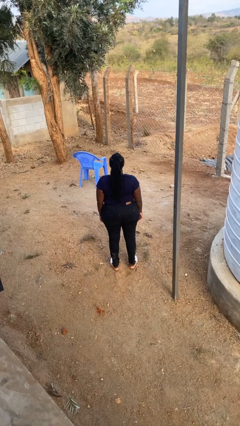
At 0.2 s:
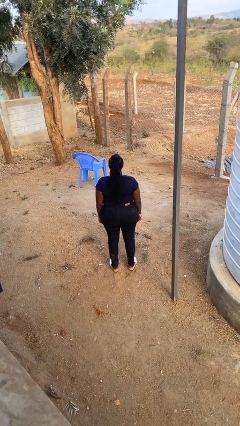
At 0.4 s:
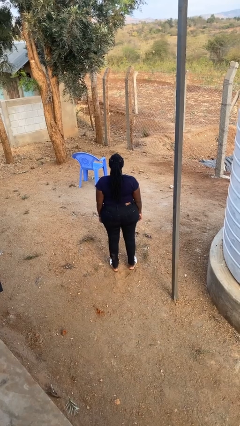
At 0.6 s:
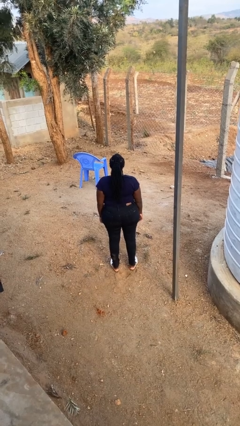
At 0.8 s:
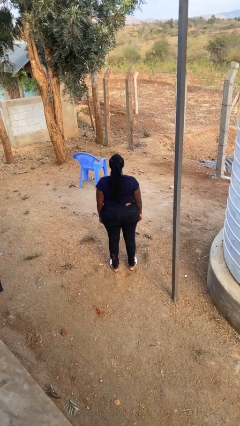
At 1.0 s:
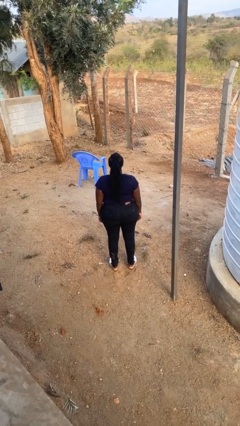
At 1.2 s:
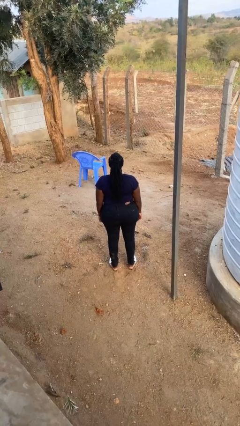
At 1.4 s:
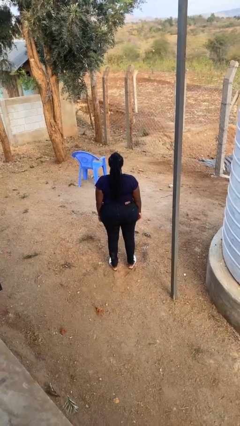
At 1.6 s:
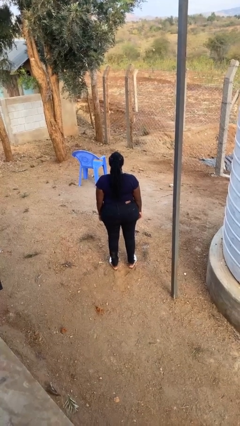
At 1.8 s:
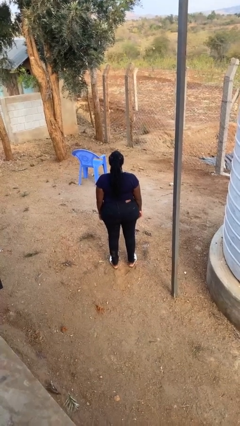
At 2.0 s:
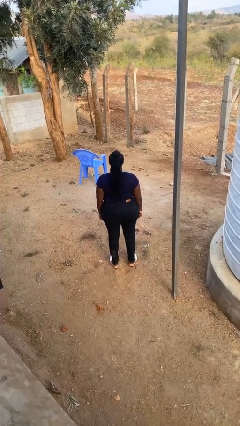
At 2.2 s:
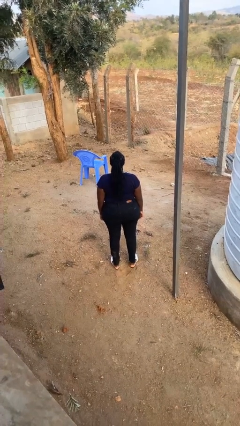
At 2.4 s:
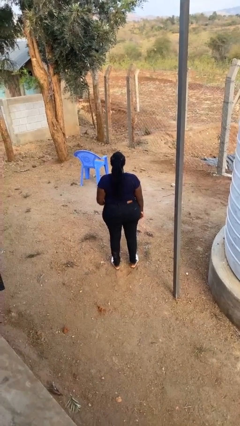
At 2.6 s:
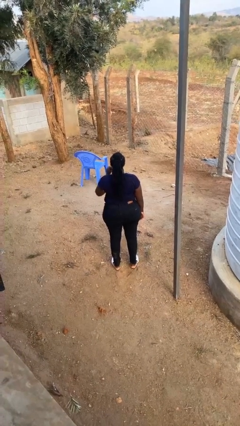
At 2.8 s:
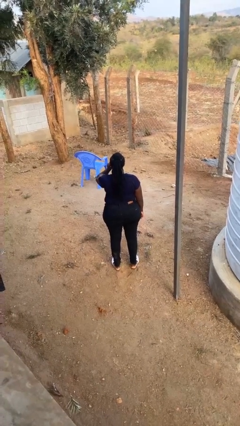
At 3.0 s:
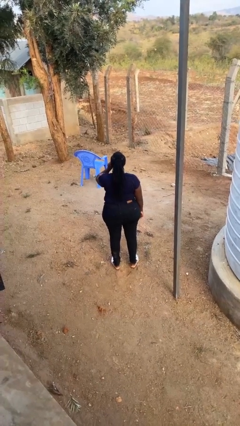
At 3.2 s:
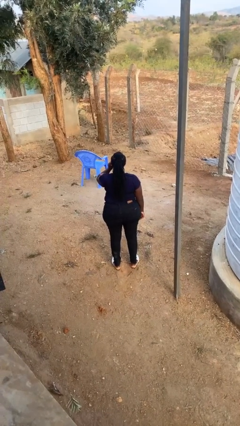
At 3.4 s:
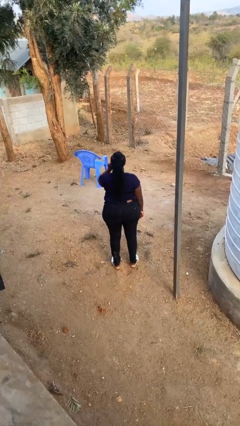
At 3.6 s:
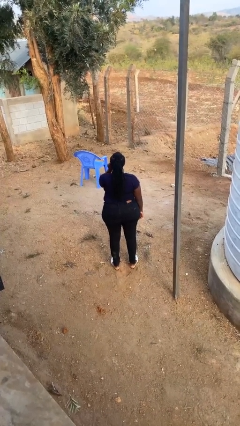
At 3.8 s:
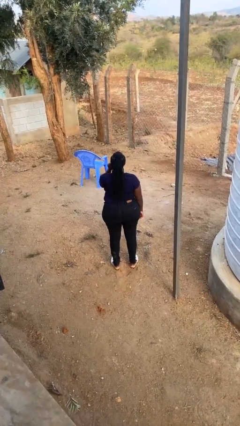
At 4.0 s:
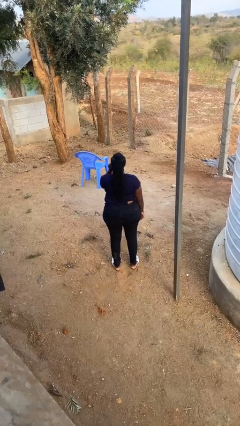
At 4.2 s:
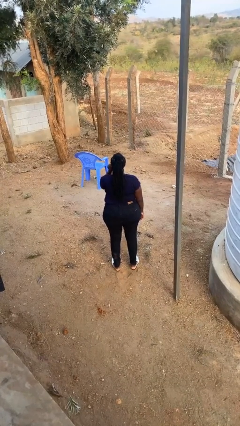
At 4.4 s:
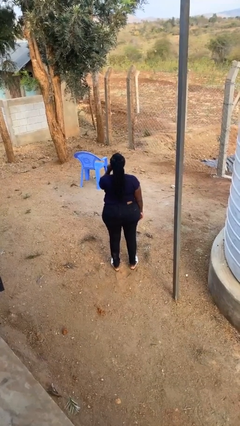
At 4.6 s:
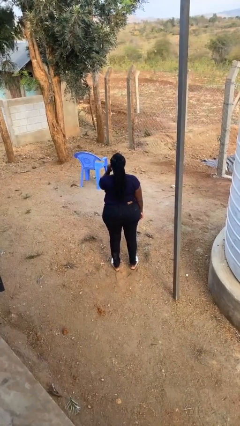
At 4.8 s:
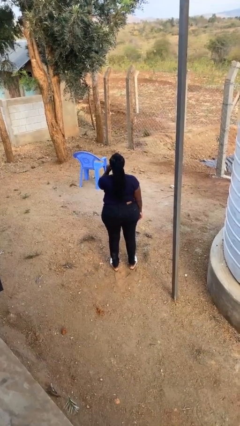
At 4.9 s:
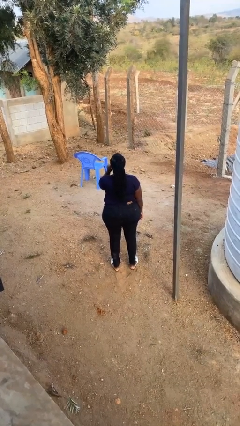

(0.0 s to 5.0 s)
person touches earlobe

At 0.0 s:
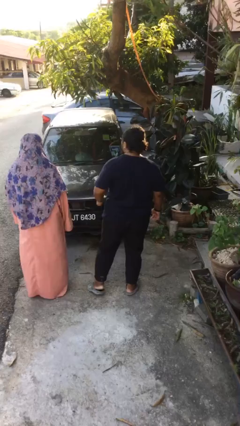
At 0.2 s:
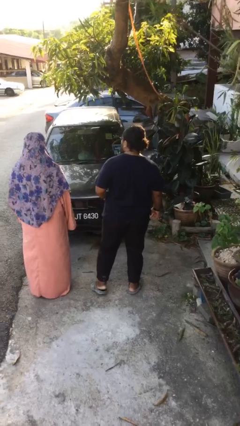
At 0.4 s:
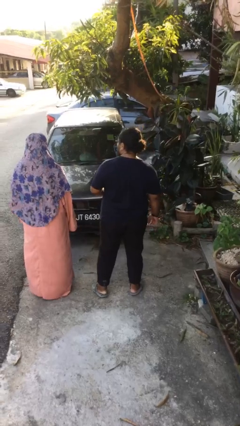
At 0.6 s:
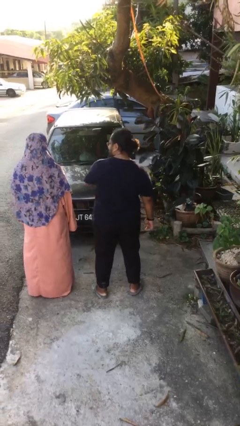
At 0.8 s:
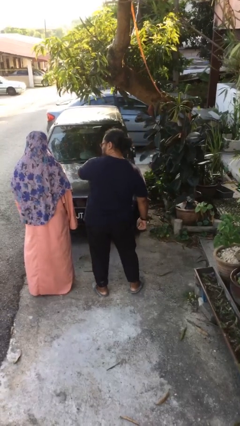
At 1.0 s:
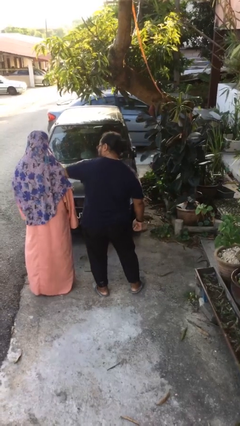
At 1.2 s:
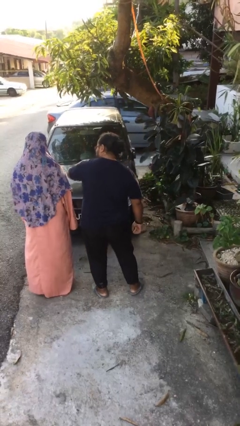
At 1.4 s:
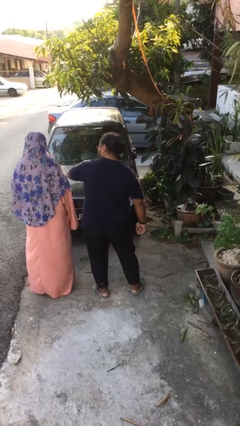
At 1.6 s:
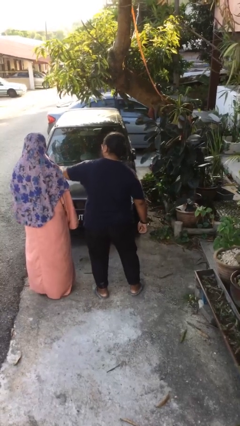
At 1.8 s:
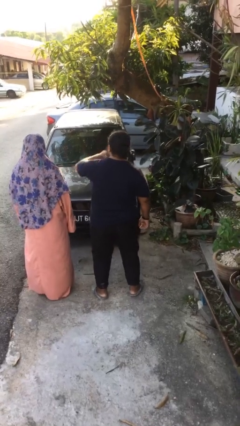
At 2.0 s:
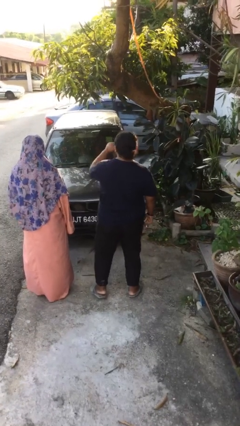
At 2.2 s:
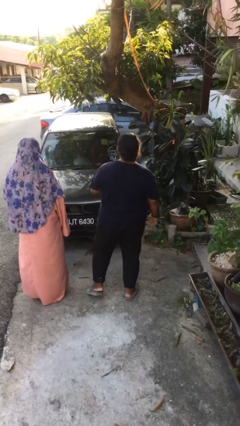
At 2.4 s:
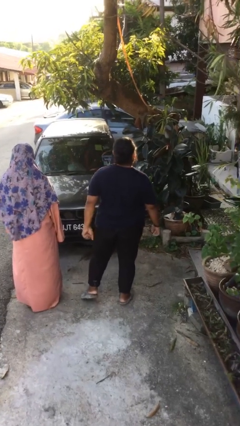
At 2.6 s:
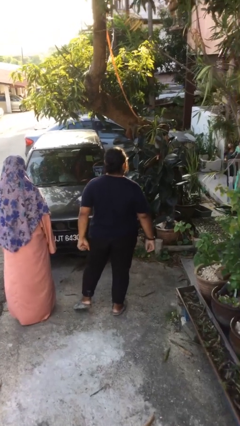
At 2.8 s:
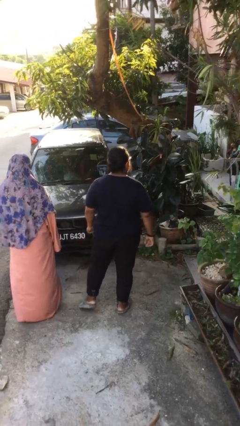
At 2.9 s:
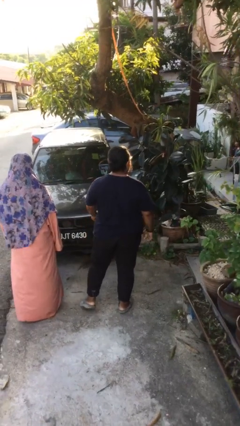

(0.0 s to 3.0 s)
person nudges person with elbow

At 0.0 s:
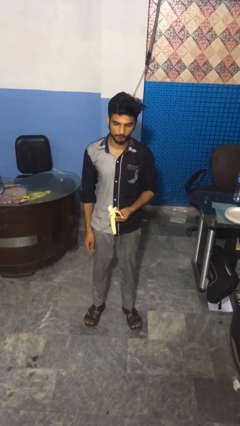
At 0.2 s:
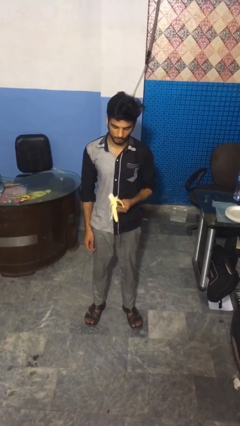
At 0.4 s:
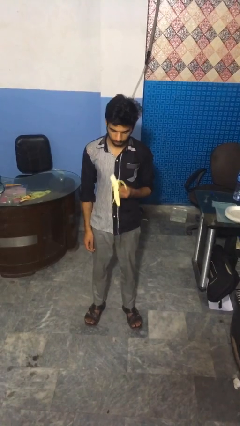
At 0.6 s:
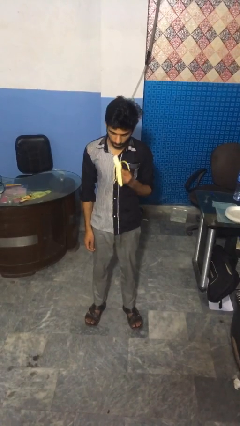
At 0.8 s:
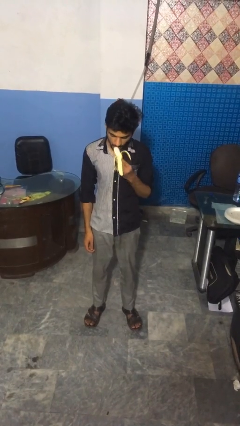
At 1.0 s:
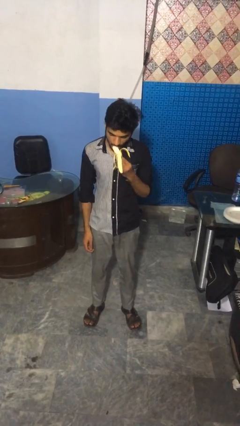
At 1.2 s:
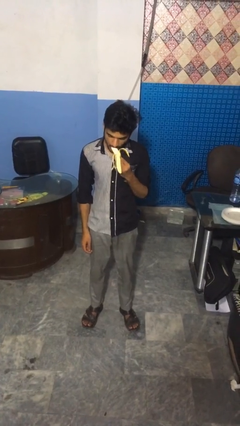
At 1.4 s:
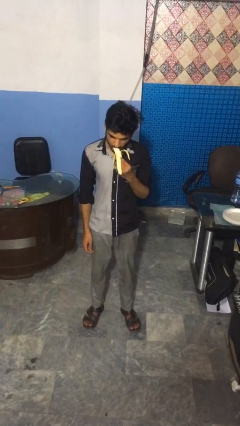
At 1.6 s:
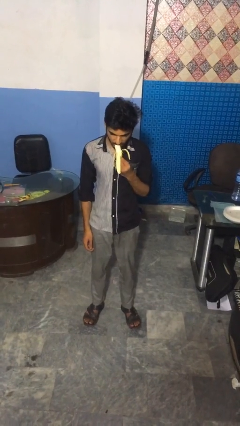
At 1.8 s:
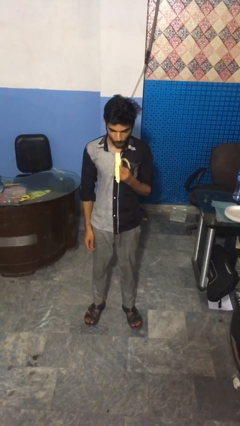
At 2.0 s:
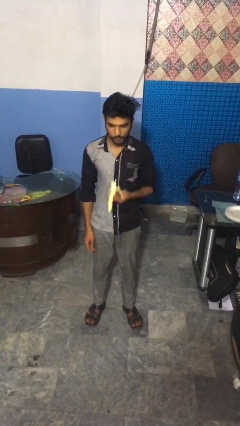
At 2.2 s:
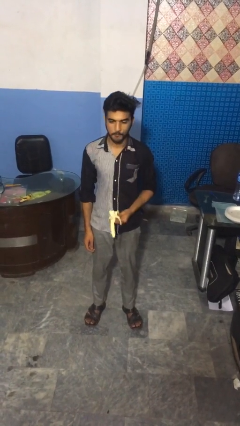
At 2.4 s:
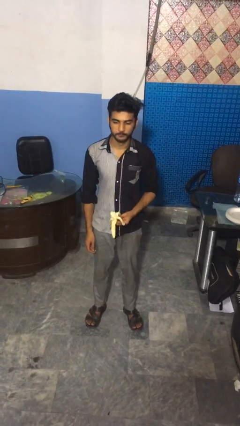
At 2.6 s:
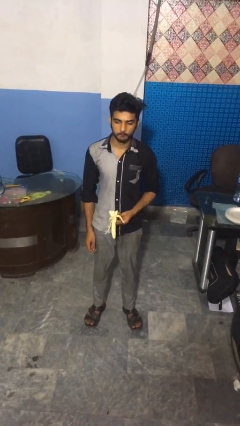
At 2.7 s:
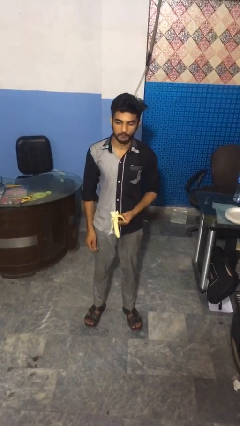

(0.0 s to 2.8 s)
person eats banana

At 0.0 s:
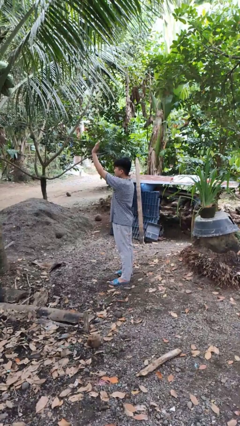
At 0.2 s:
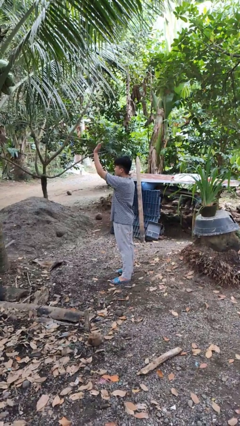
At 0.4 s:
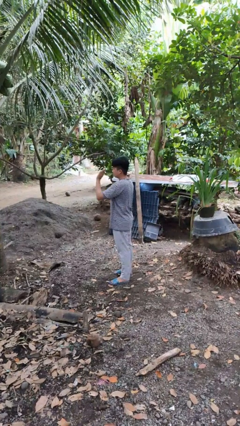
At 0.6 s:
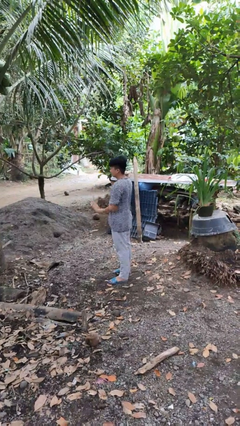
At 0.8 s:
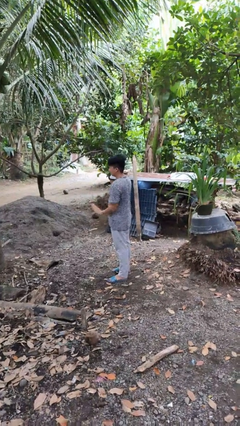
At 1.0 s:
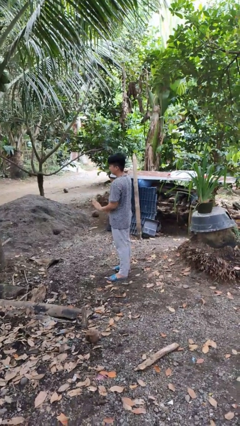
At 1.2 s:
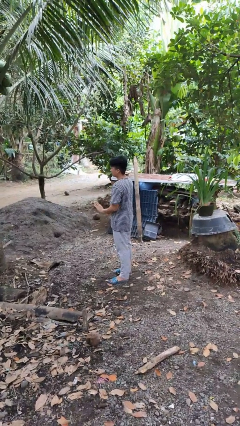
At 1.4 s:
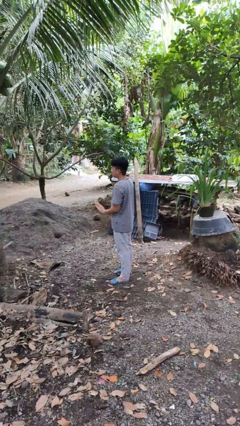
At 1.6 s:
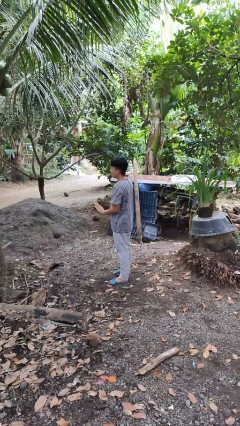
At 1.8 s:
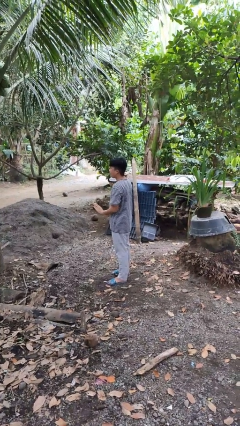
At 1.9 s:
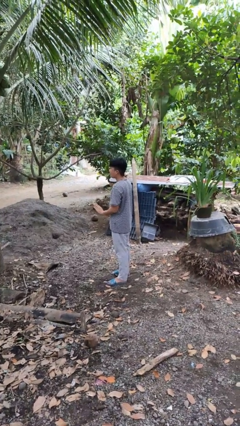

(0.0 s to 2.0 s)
person gestures swipe down

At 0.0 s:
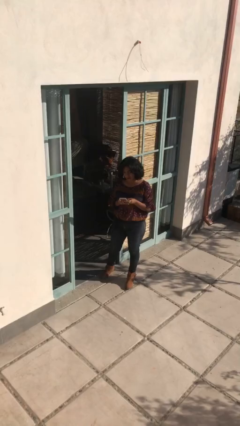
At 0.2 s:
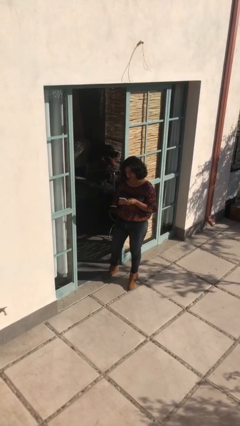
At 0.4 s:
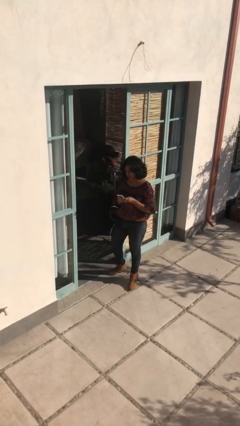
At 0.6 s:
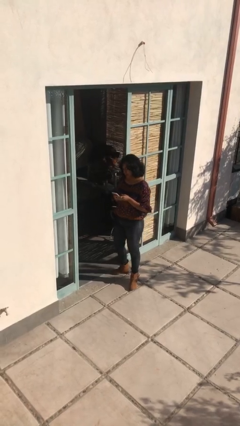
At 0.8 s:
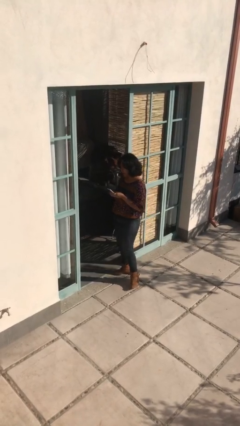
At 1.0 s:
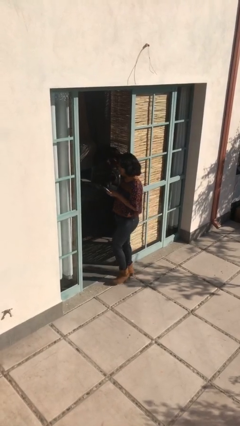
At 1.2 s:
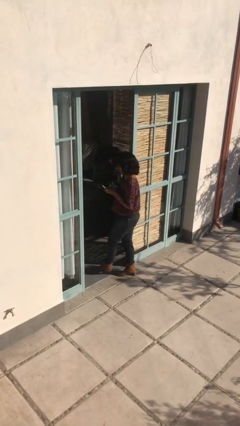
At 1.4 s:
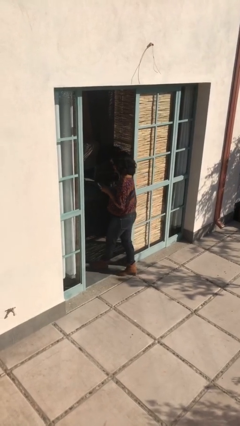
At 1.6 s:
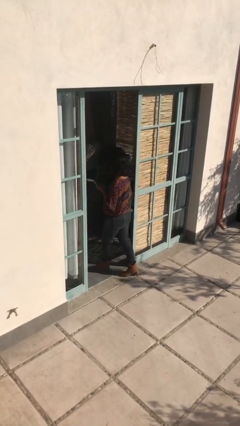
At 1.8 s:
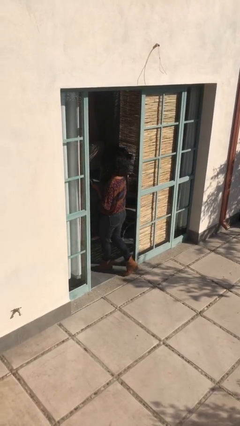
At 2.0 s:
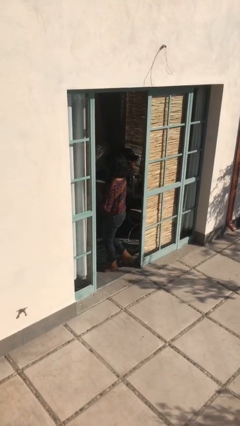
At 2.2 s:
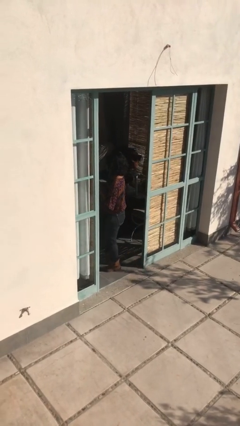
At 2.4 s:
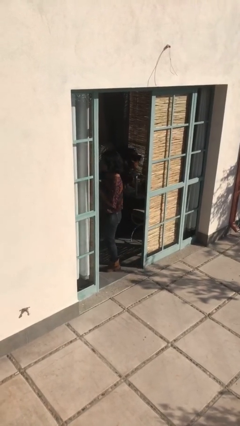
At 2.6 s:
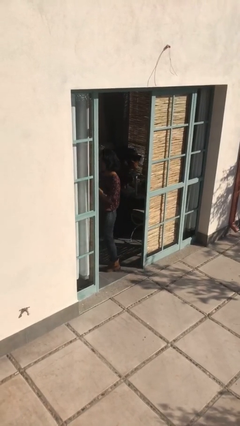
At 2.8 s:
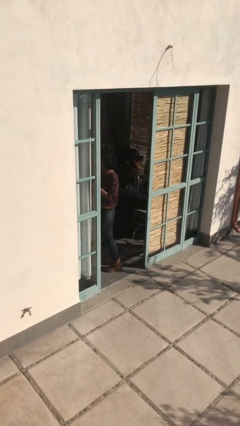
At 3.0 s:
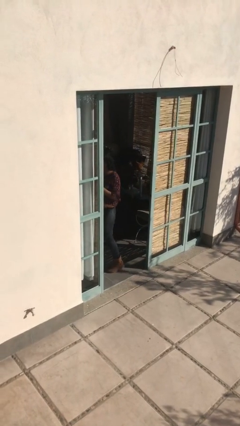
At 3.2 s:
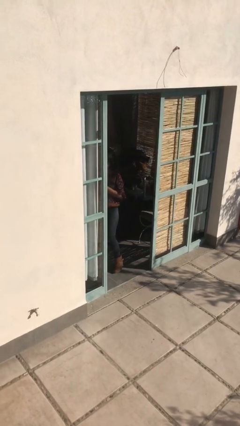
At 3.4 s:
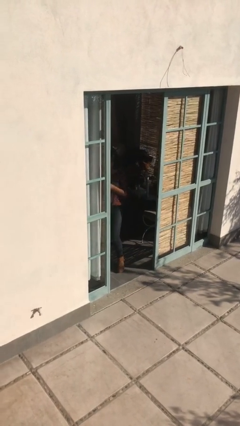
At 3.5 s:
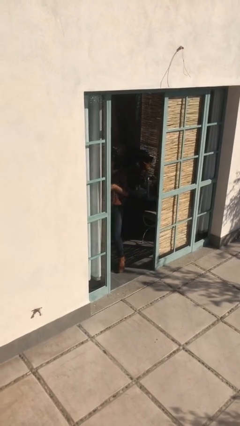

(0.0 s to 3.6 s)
person exits scene through structure

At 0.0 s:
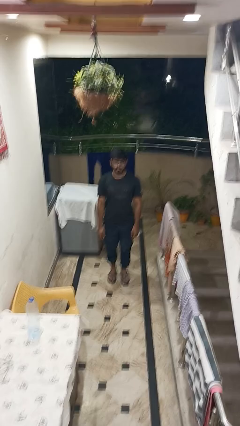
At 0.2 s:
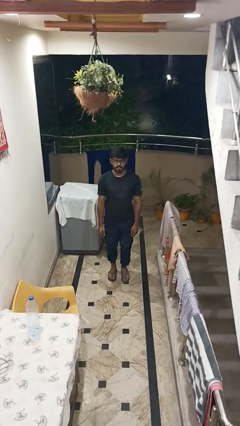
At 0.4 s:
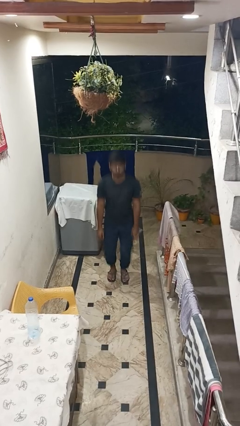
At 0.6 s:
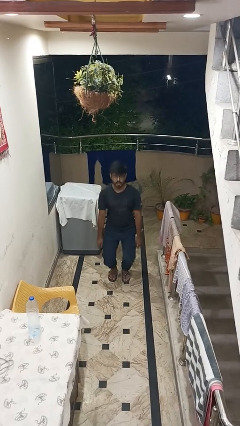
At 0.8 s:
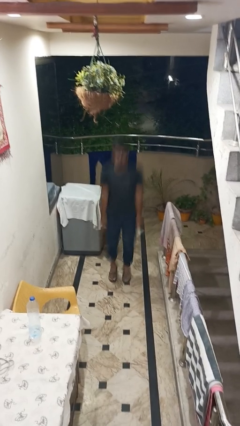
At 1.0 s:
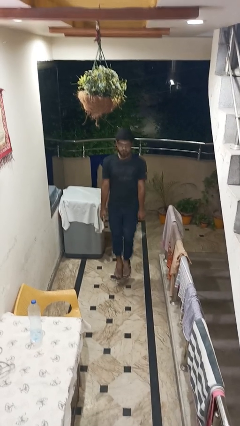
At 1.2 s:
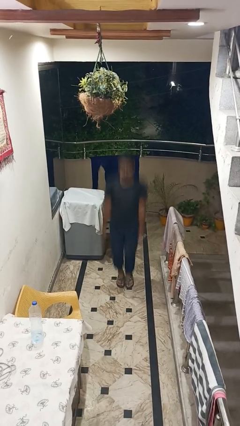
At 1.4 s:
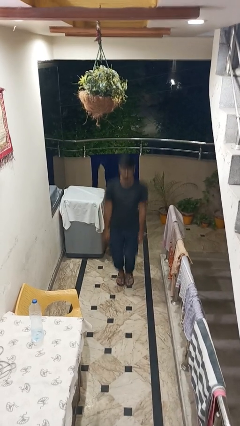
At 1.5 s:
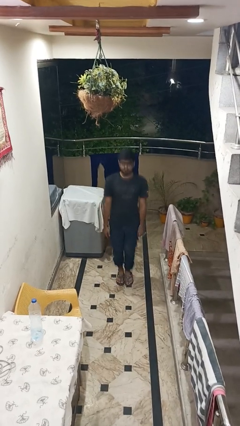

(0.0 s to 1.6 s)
person jumps
